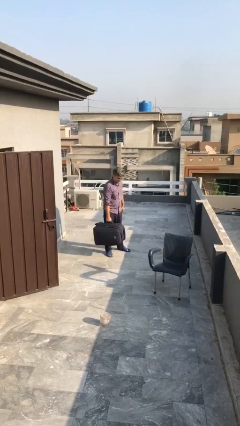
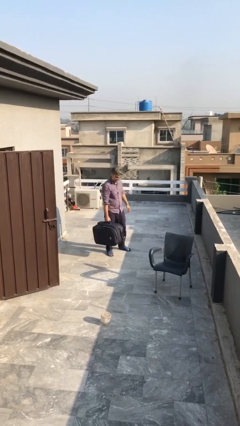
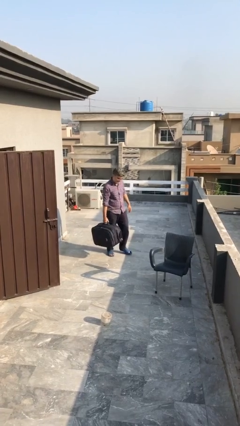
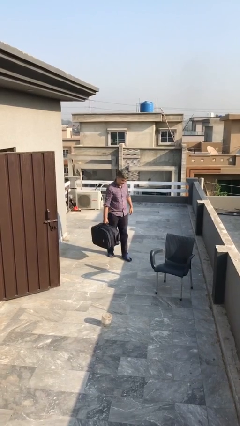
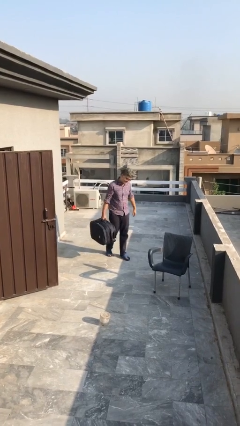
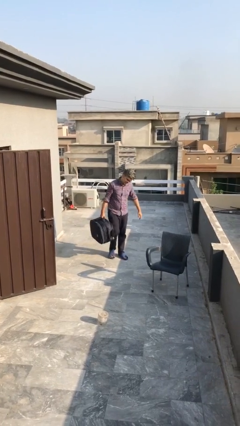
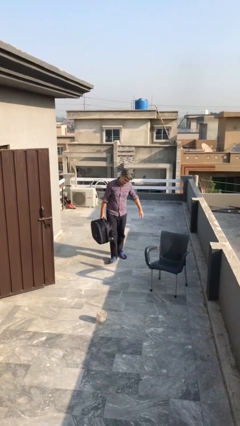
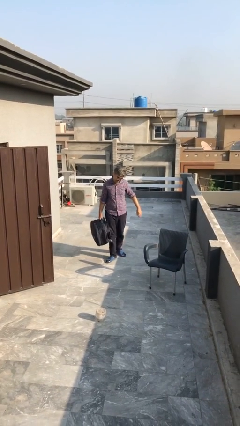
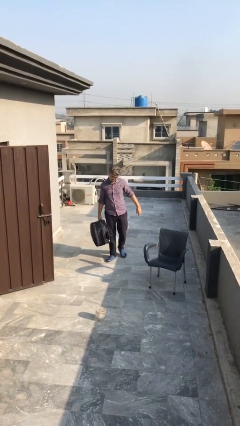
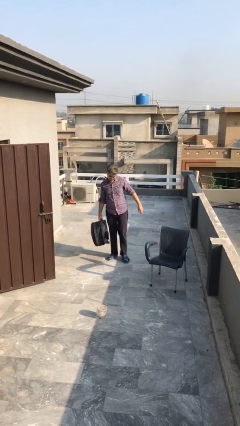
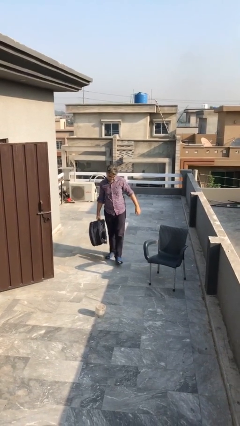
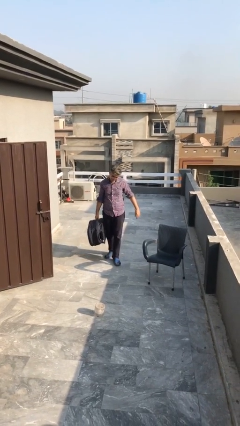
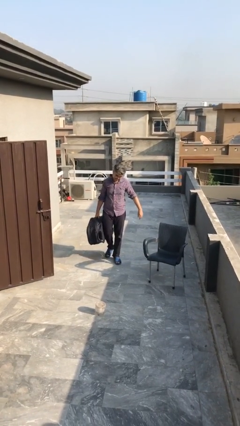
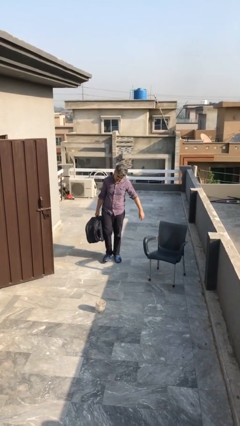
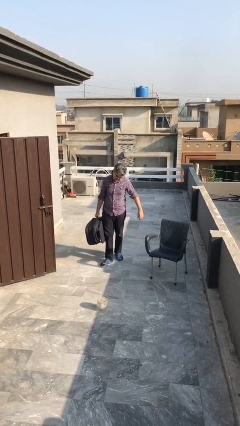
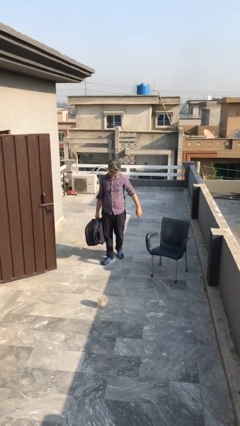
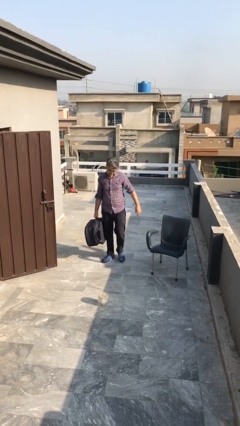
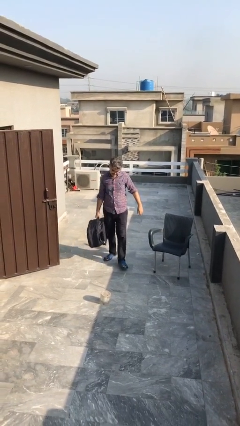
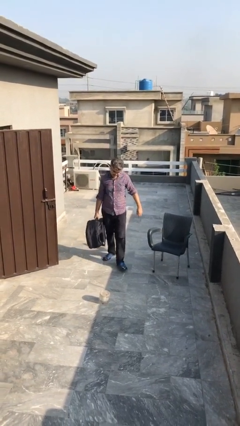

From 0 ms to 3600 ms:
person carries heavy object

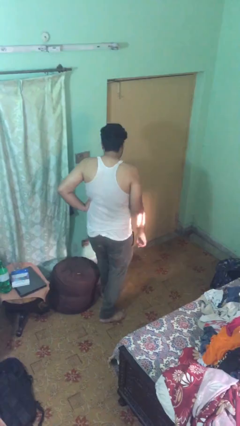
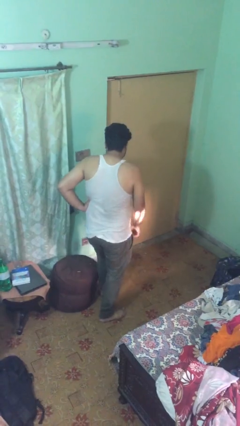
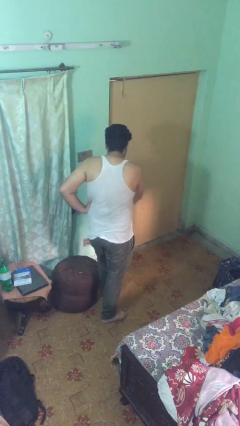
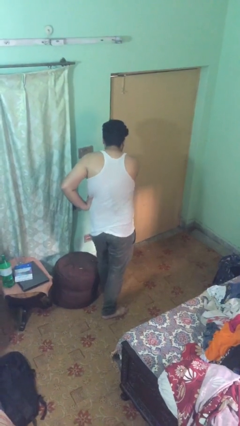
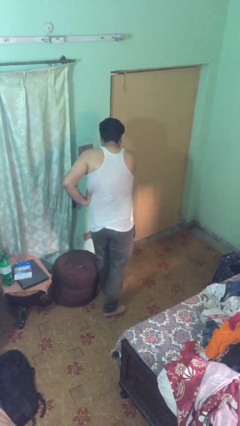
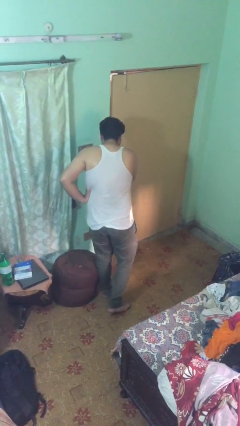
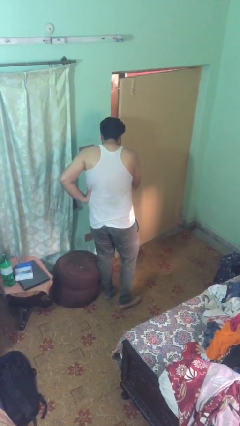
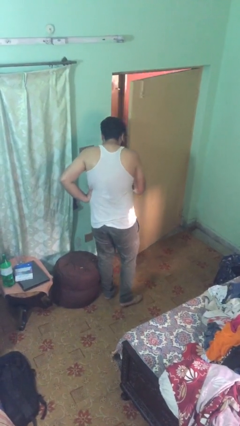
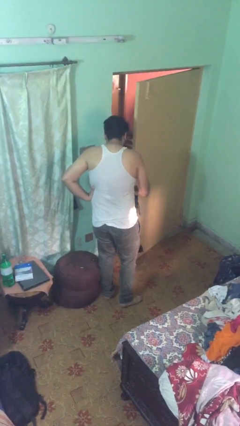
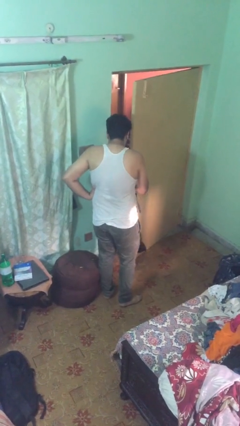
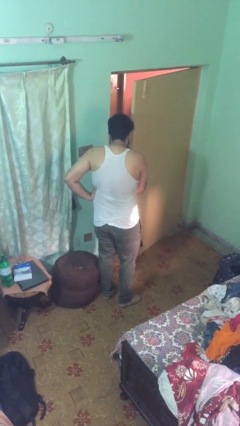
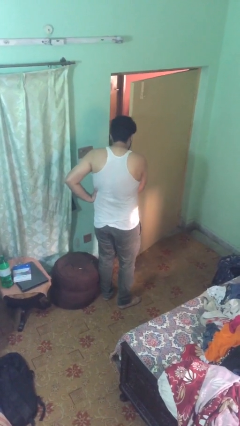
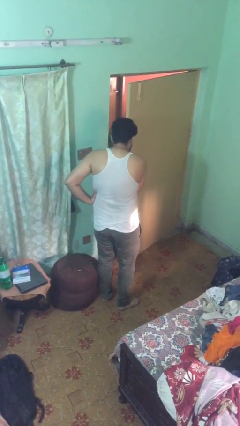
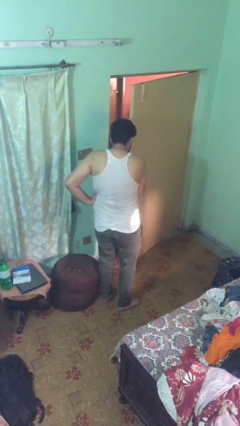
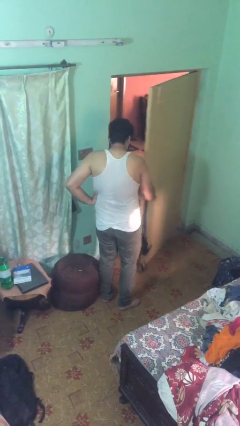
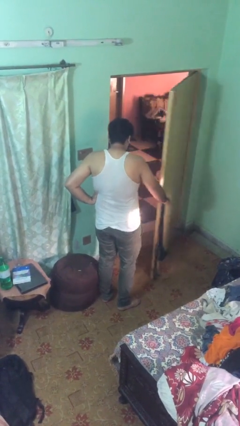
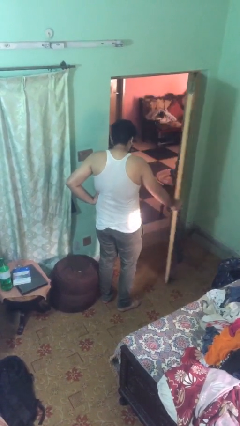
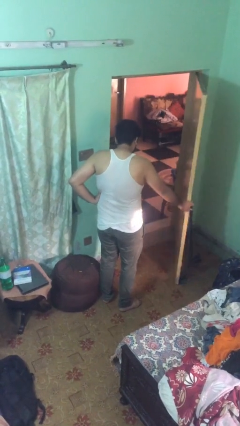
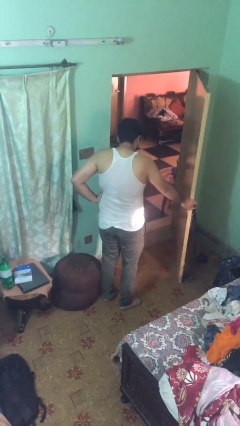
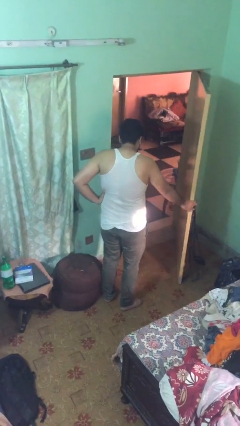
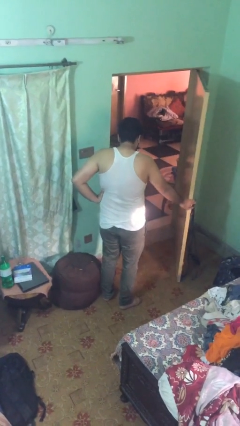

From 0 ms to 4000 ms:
person opens facility door

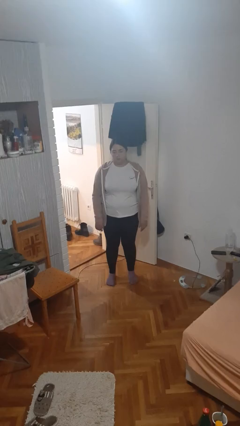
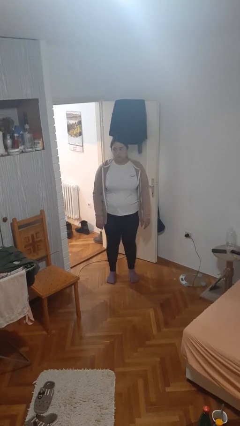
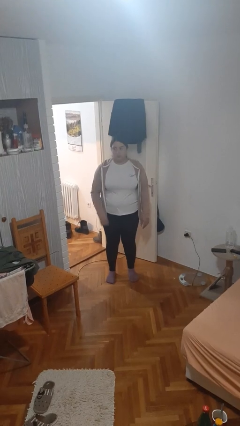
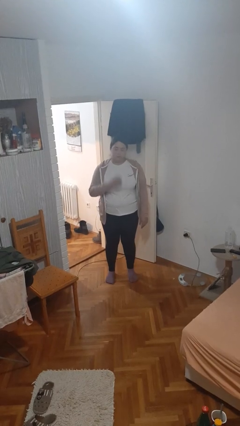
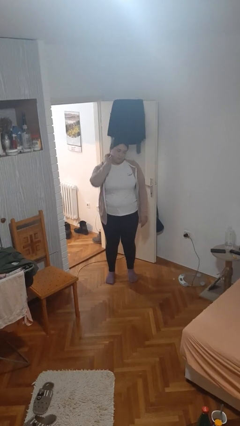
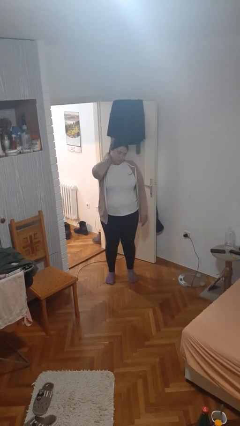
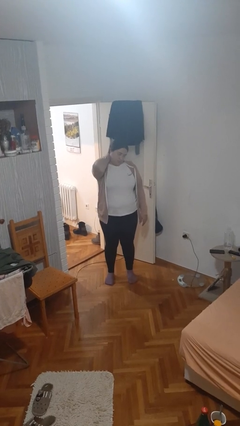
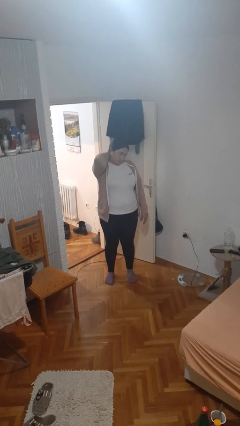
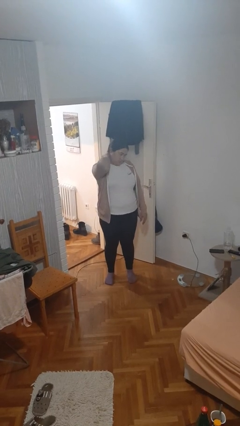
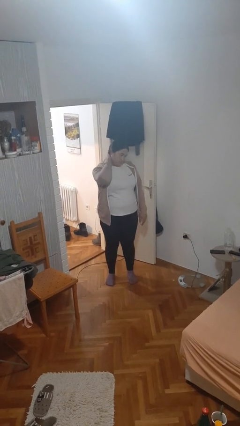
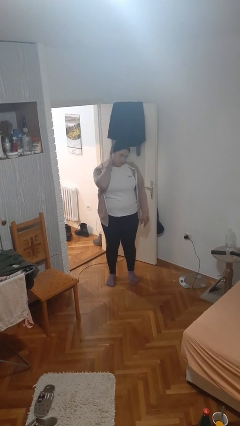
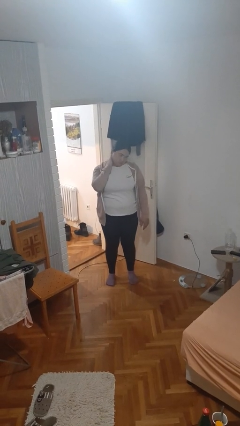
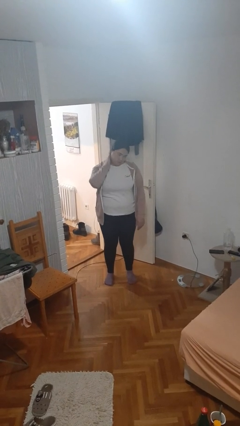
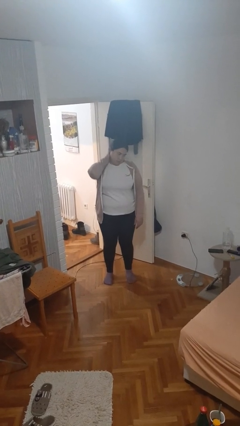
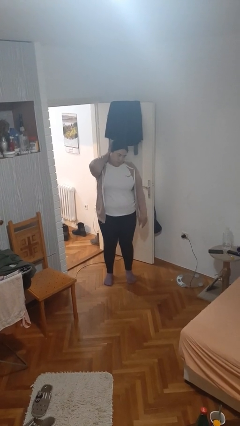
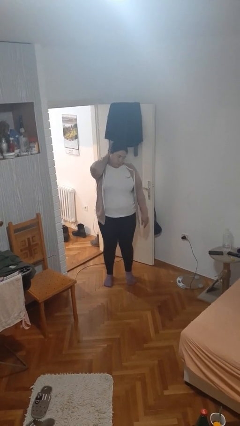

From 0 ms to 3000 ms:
person rubs neck

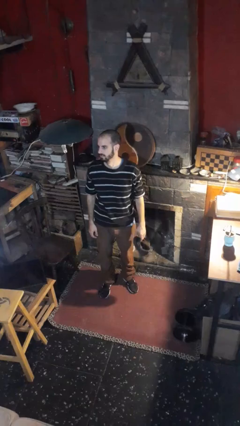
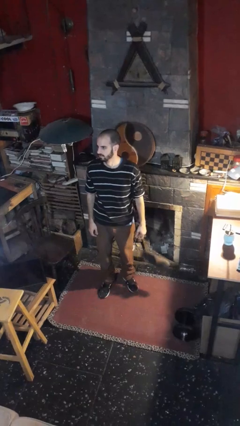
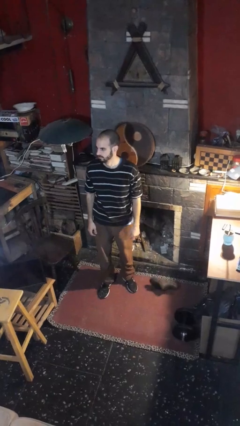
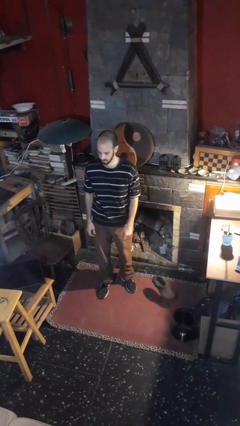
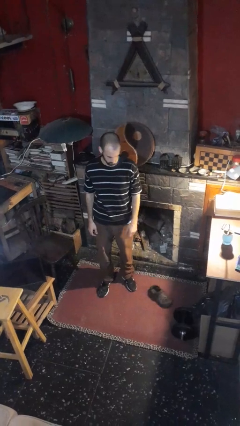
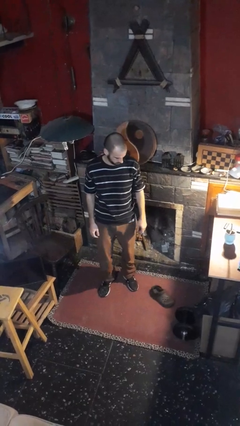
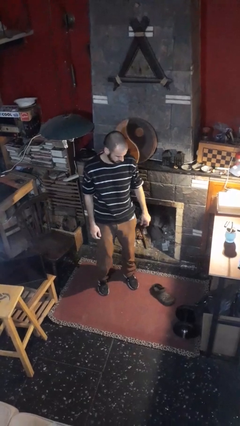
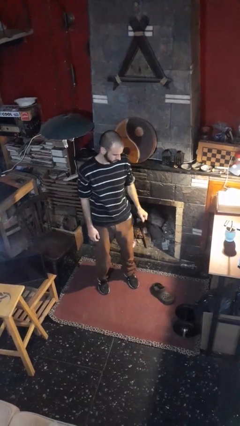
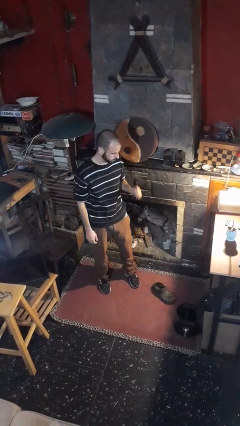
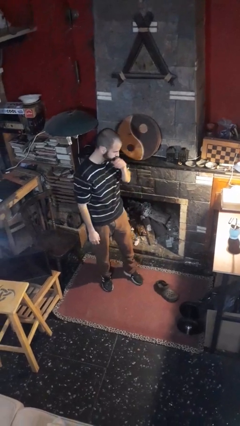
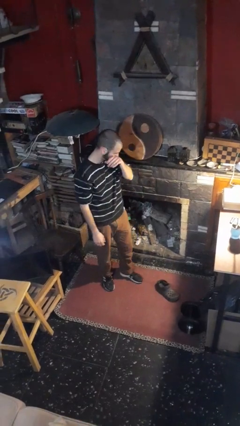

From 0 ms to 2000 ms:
person drops object

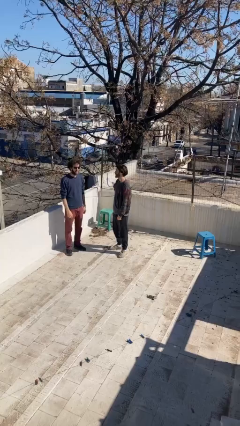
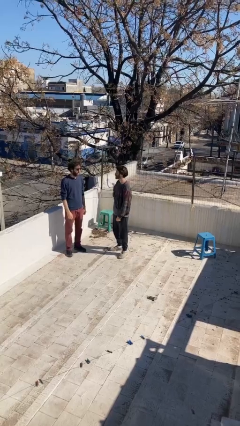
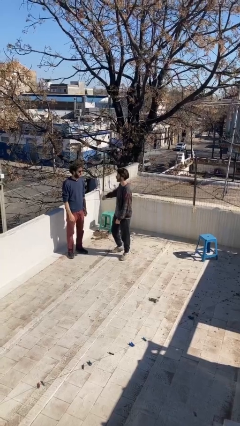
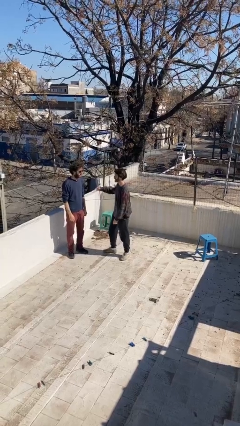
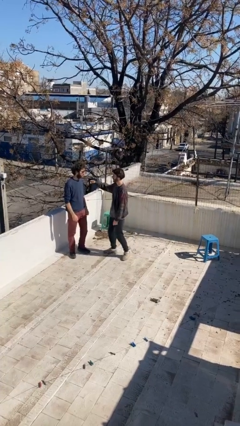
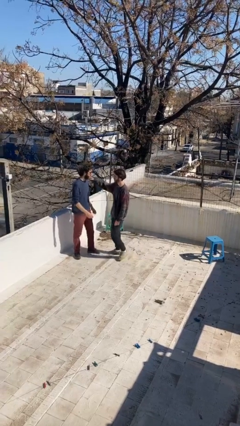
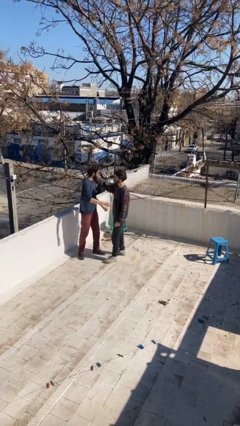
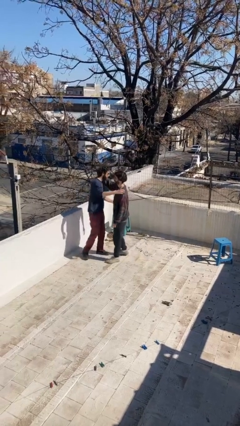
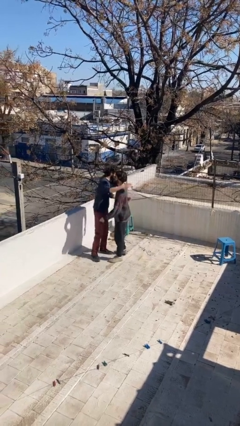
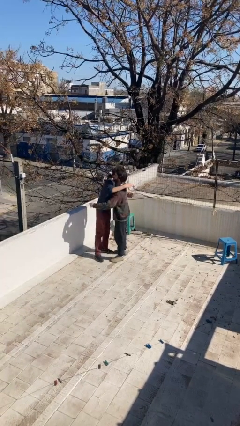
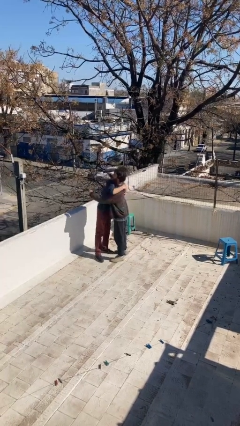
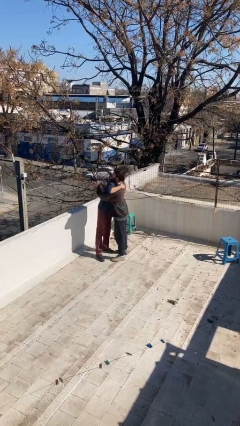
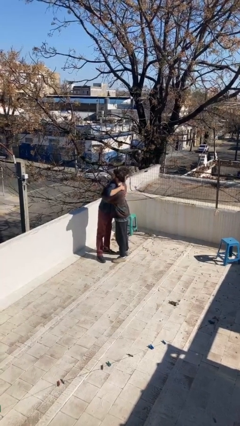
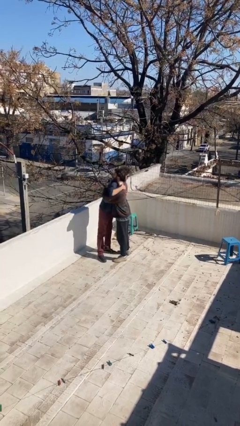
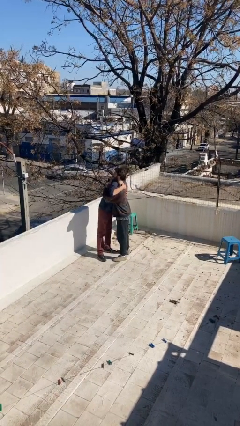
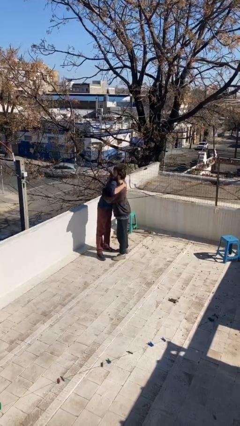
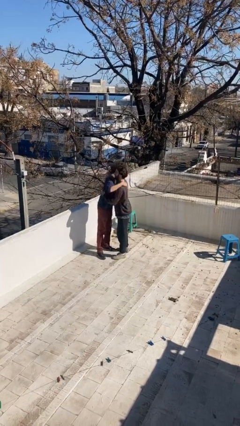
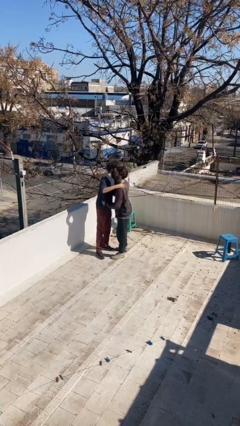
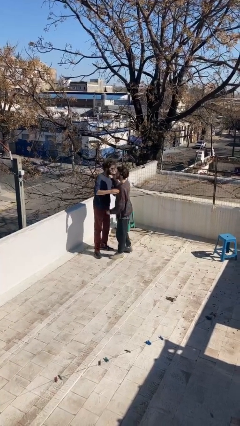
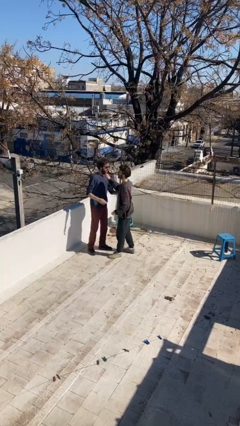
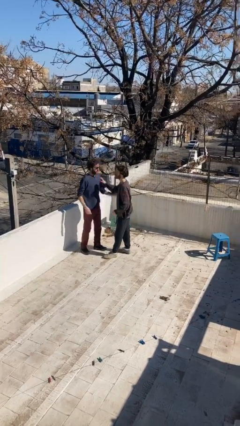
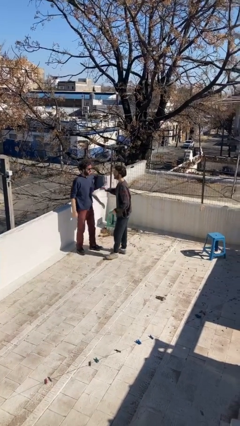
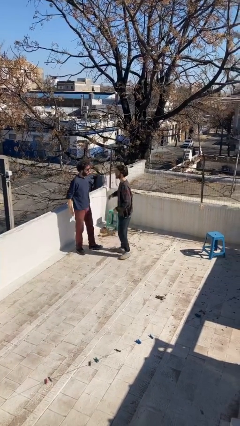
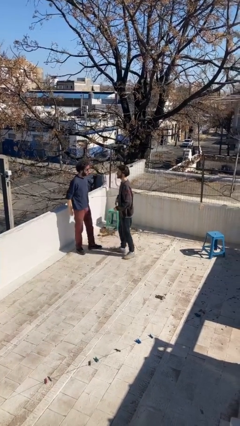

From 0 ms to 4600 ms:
person embraces person

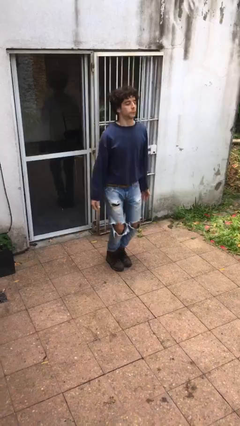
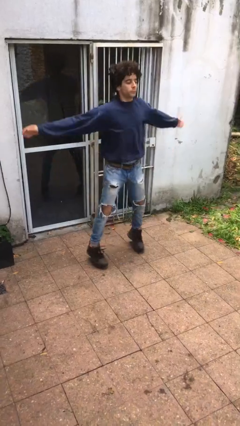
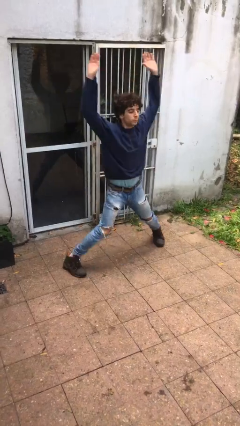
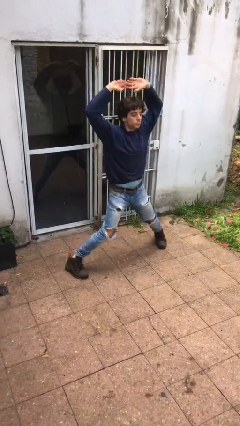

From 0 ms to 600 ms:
person exercises with jumping jacks
